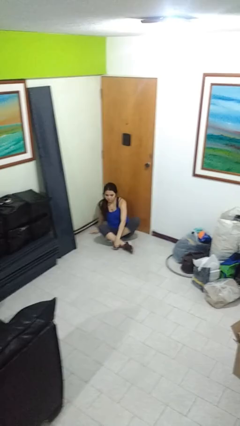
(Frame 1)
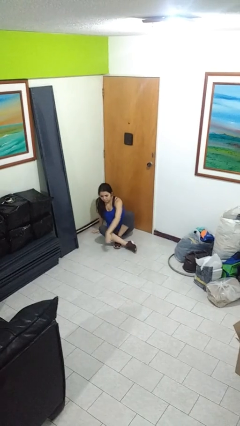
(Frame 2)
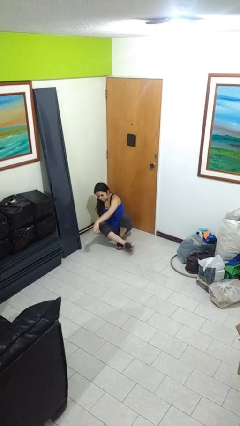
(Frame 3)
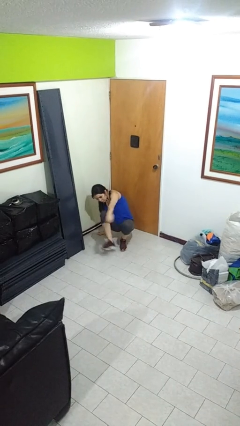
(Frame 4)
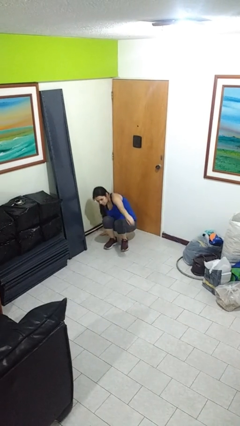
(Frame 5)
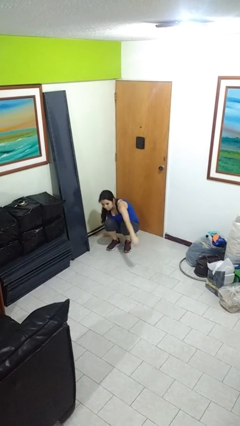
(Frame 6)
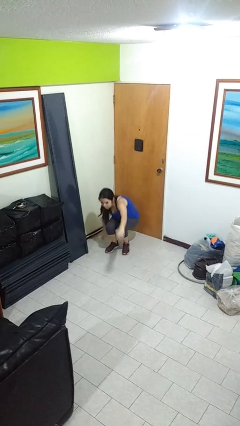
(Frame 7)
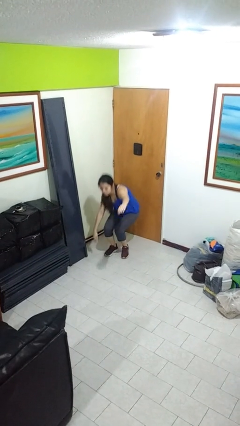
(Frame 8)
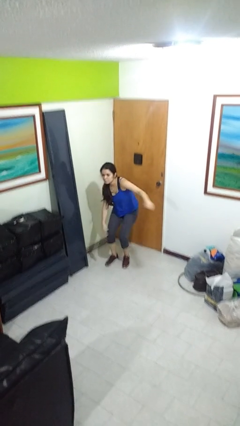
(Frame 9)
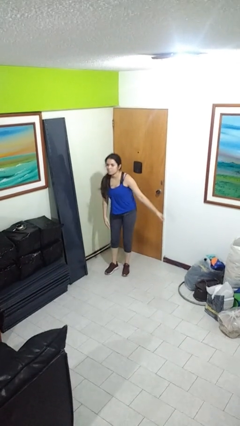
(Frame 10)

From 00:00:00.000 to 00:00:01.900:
person stands up from floor

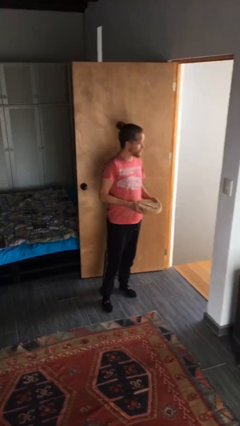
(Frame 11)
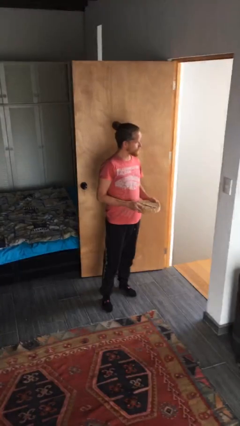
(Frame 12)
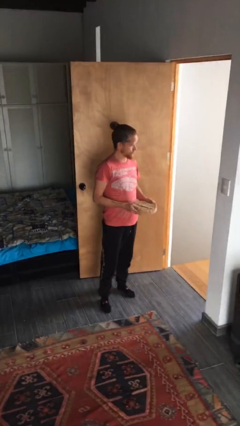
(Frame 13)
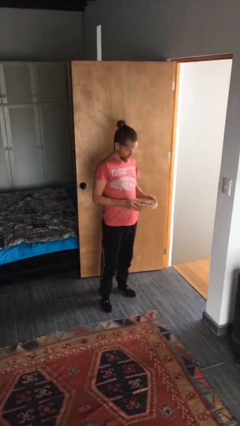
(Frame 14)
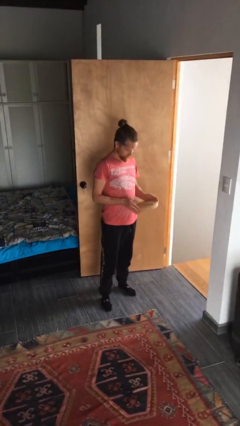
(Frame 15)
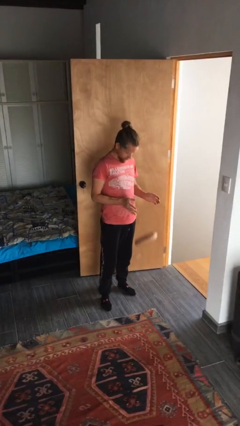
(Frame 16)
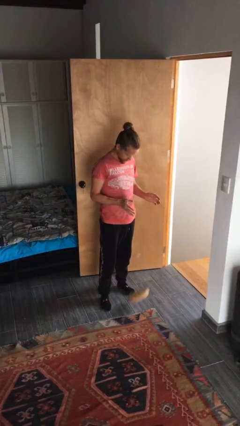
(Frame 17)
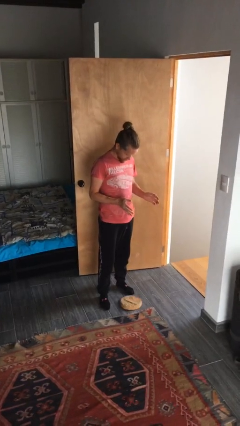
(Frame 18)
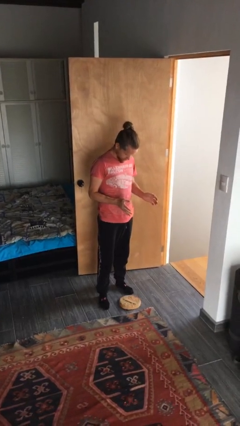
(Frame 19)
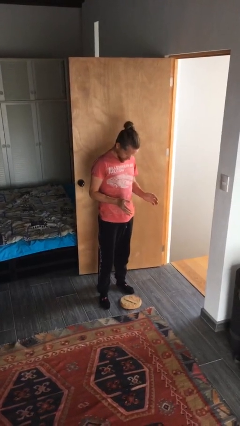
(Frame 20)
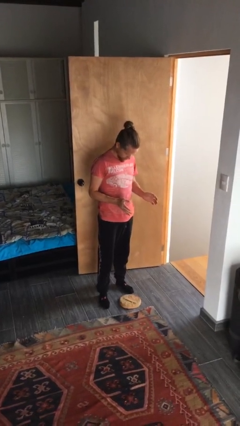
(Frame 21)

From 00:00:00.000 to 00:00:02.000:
person drops object

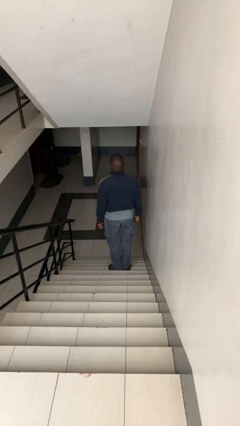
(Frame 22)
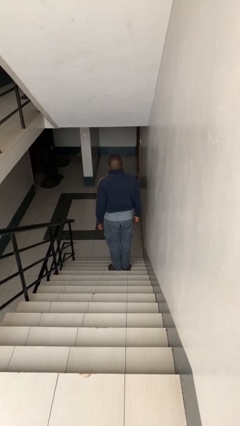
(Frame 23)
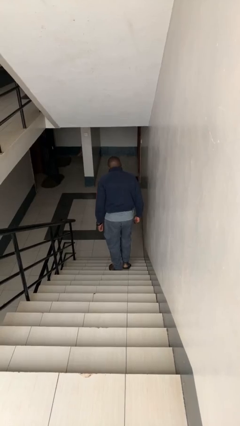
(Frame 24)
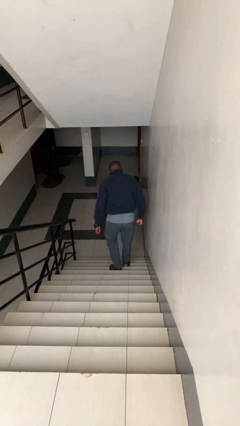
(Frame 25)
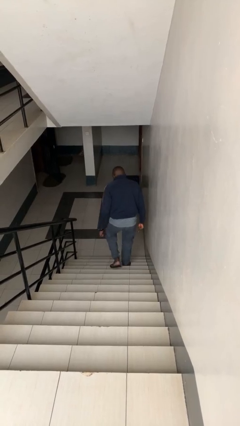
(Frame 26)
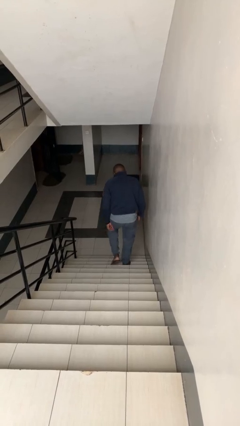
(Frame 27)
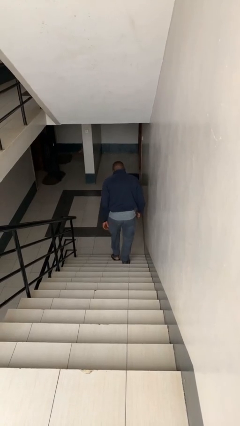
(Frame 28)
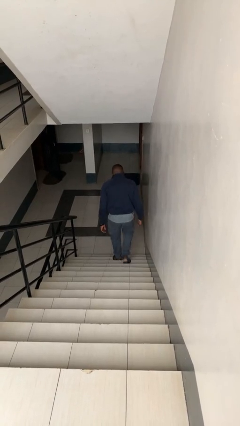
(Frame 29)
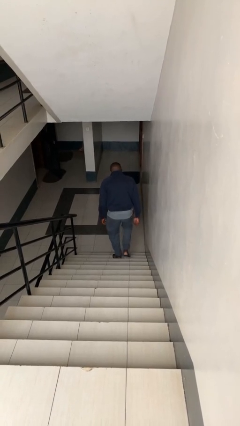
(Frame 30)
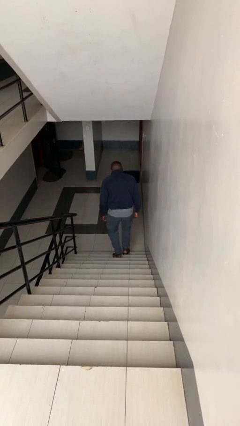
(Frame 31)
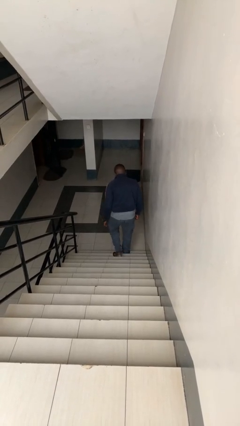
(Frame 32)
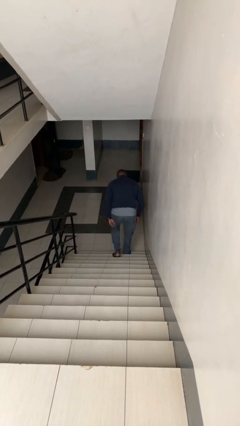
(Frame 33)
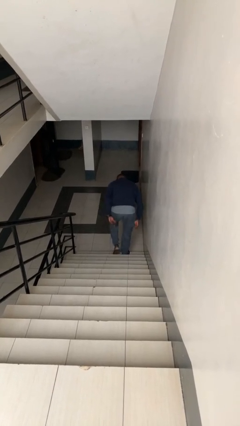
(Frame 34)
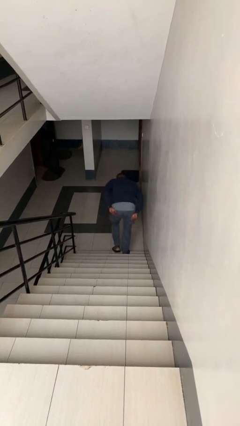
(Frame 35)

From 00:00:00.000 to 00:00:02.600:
person climbs down stairs

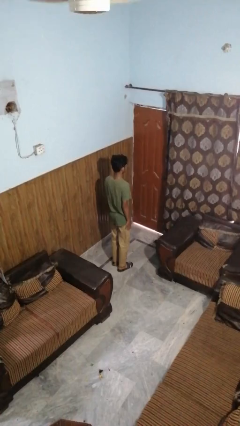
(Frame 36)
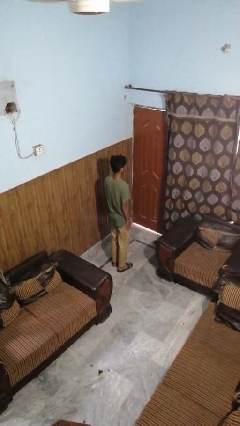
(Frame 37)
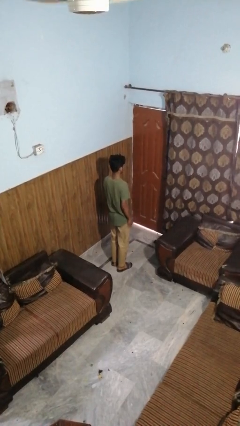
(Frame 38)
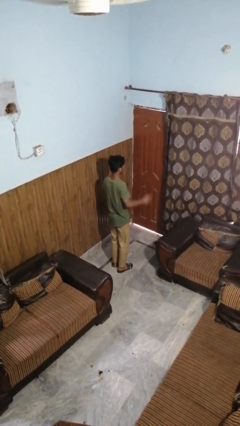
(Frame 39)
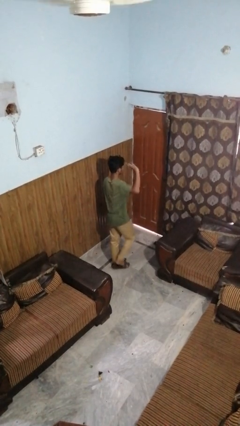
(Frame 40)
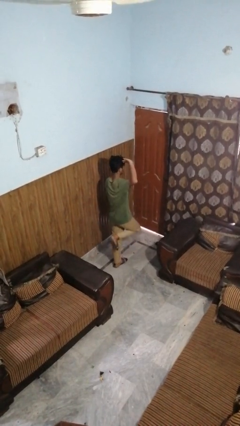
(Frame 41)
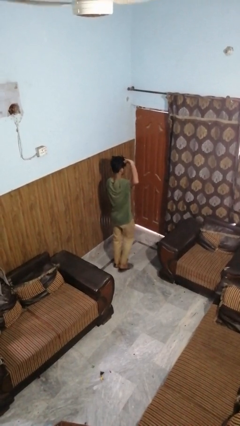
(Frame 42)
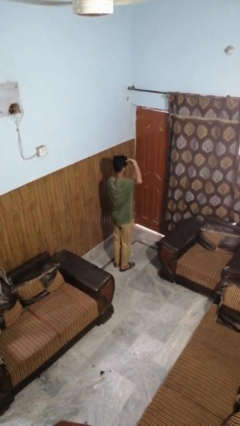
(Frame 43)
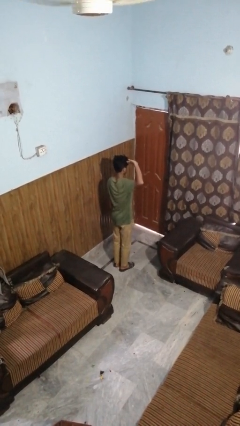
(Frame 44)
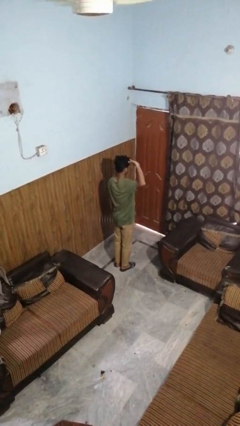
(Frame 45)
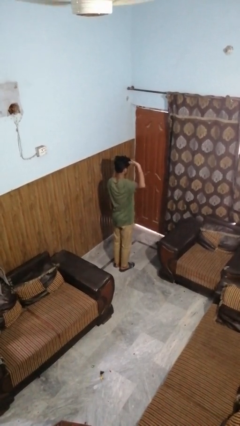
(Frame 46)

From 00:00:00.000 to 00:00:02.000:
person salutes

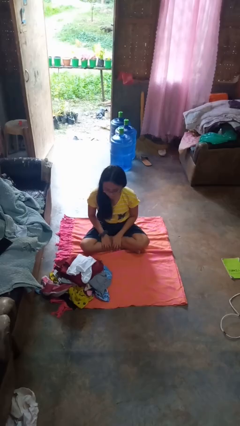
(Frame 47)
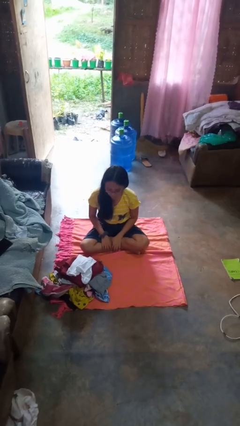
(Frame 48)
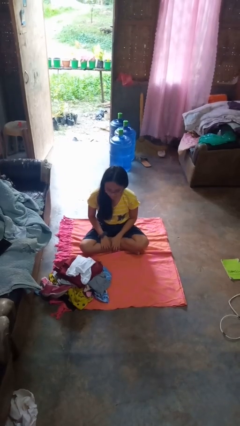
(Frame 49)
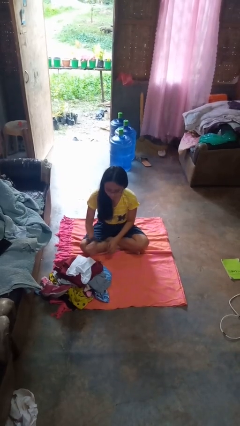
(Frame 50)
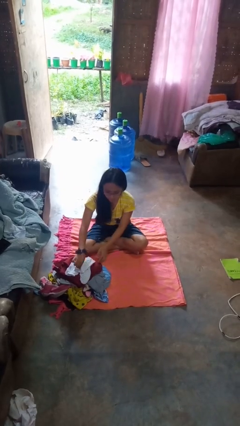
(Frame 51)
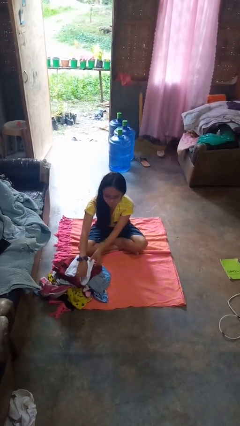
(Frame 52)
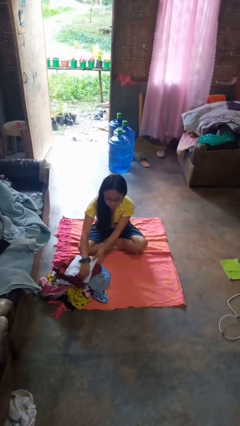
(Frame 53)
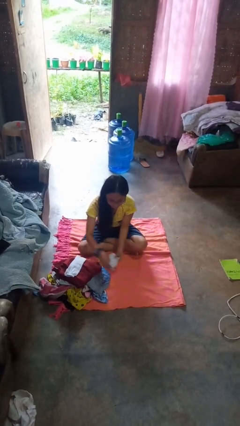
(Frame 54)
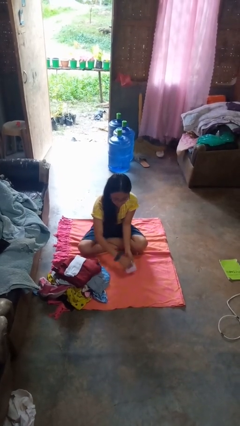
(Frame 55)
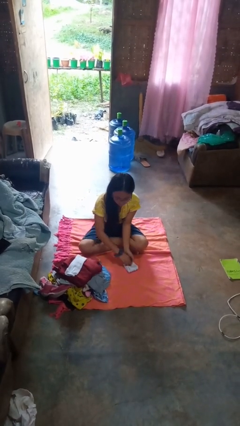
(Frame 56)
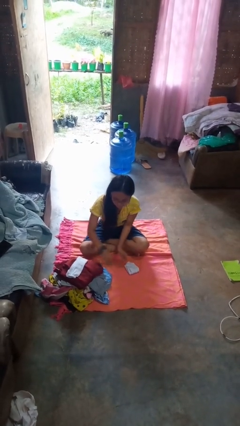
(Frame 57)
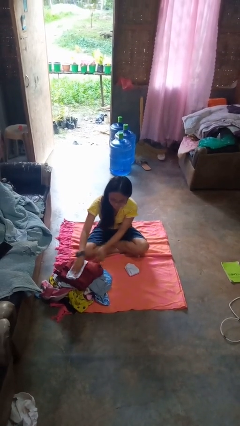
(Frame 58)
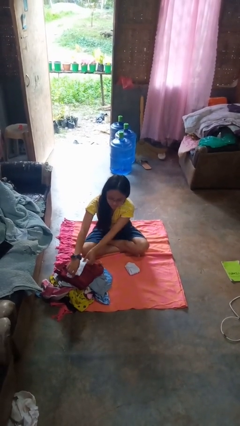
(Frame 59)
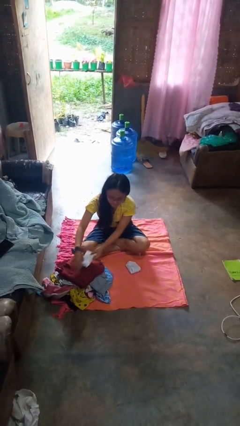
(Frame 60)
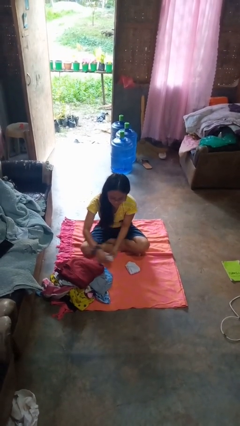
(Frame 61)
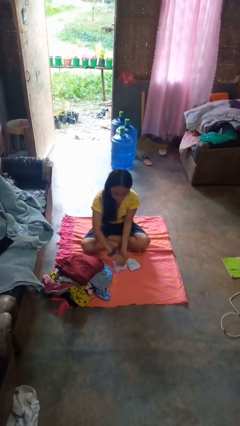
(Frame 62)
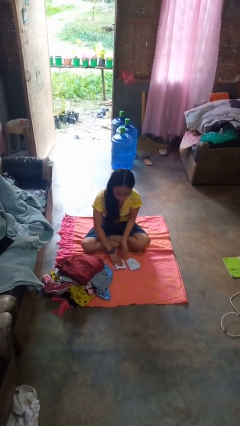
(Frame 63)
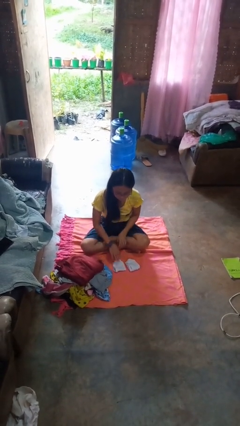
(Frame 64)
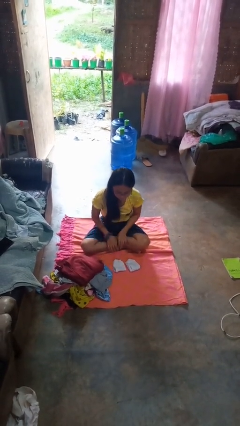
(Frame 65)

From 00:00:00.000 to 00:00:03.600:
person folds socks

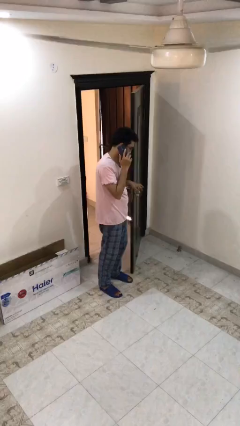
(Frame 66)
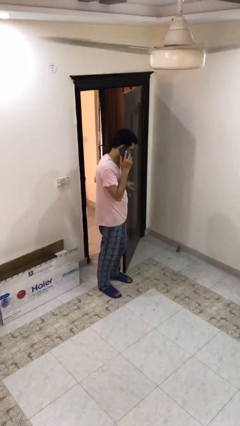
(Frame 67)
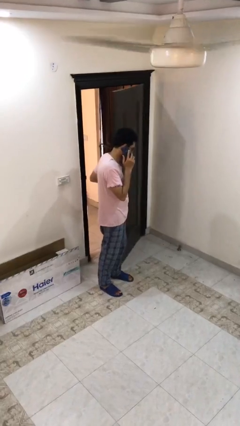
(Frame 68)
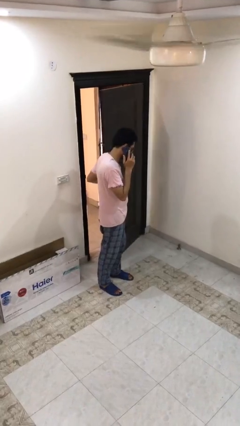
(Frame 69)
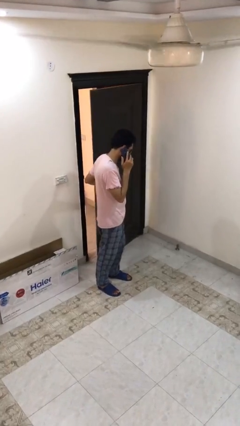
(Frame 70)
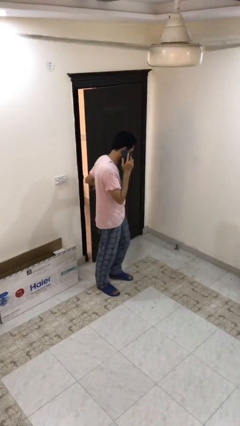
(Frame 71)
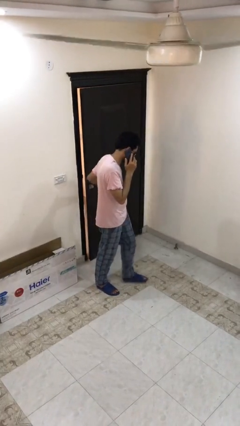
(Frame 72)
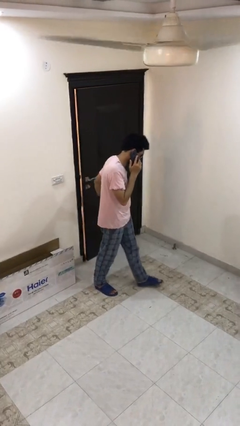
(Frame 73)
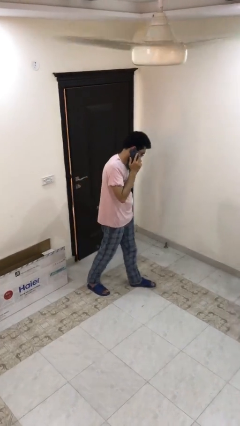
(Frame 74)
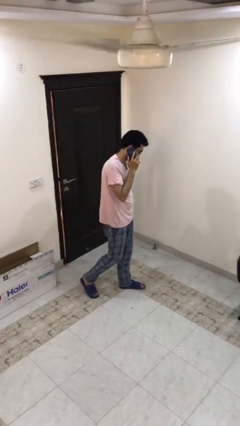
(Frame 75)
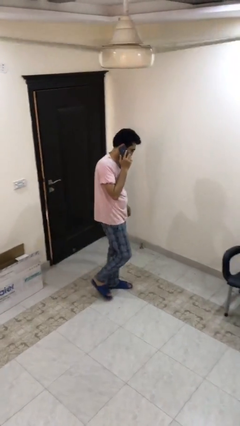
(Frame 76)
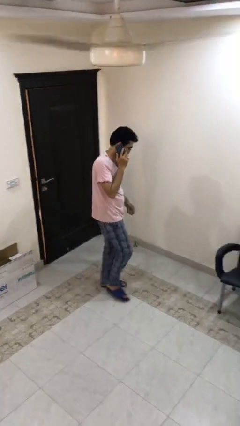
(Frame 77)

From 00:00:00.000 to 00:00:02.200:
person closes facility door

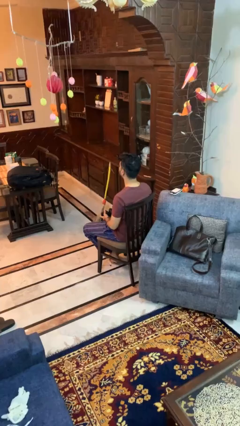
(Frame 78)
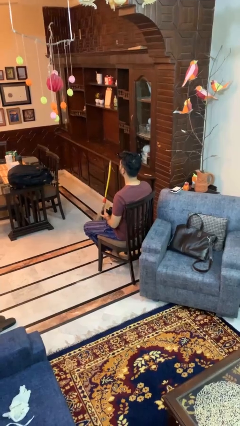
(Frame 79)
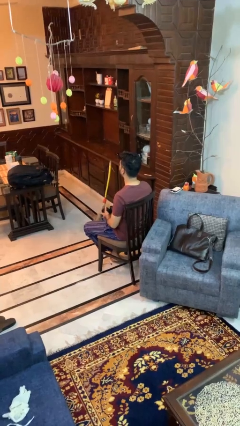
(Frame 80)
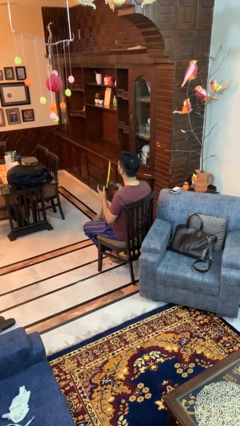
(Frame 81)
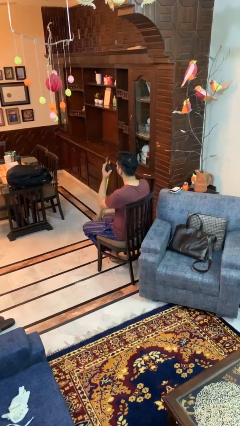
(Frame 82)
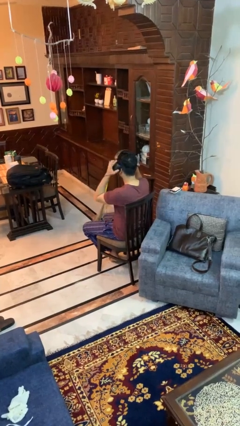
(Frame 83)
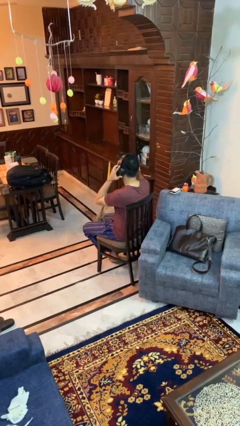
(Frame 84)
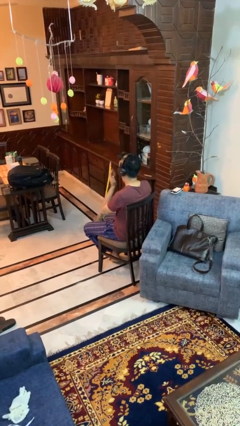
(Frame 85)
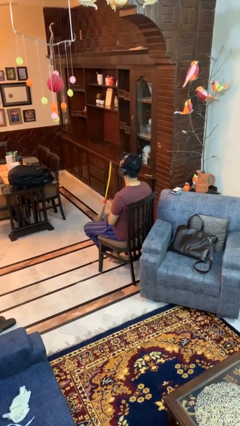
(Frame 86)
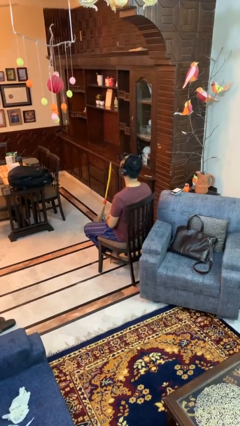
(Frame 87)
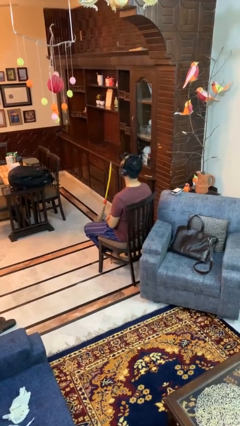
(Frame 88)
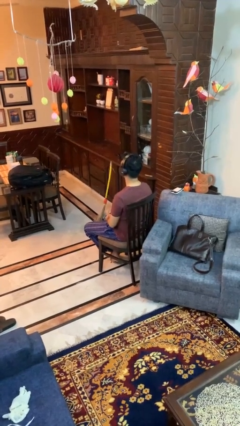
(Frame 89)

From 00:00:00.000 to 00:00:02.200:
person puts on headphones

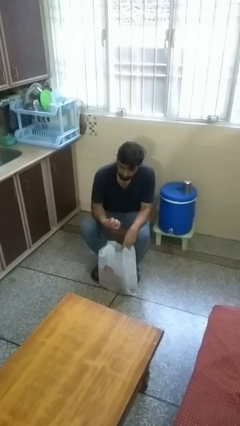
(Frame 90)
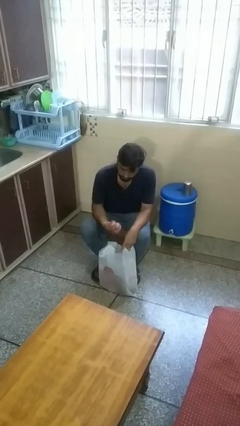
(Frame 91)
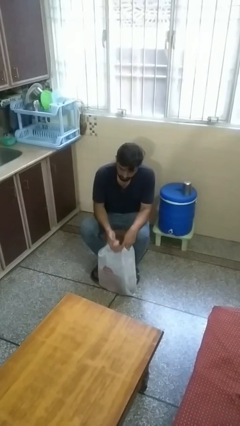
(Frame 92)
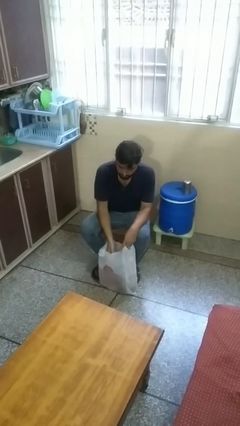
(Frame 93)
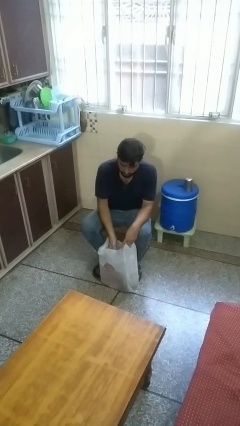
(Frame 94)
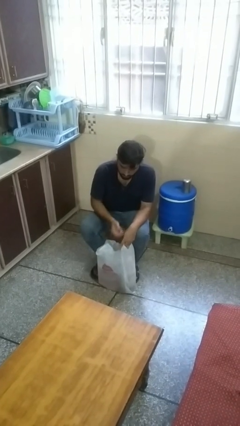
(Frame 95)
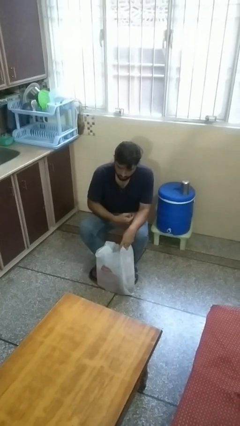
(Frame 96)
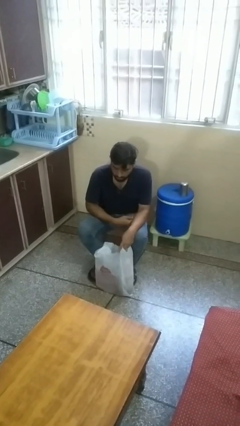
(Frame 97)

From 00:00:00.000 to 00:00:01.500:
person puts object into bag
